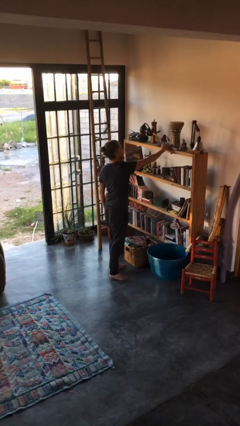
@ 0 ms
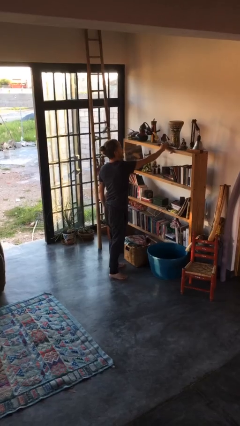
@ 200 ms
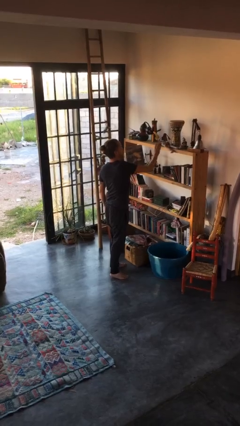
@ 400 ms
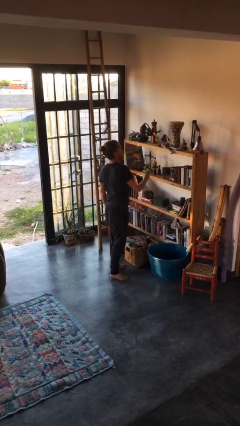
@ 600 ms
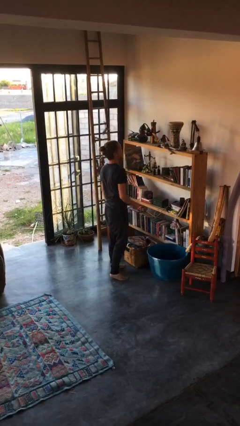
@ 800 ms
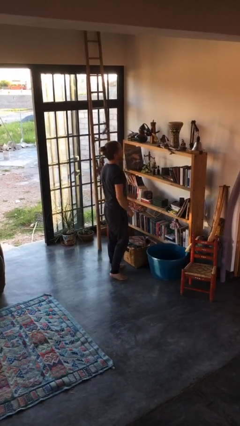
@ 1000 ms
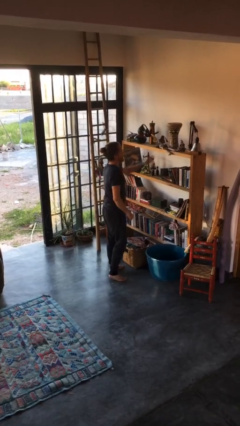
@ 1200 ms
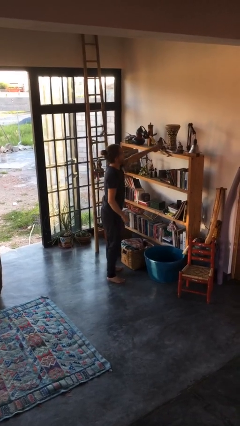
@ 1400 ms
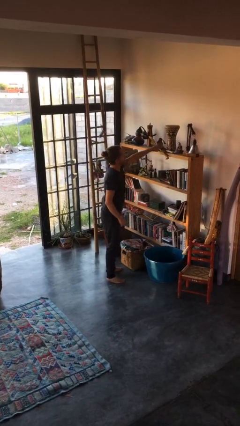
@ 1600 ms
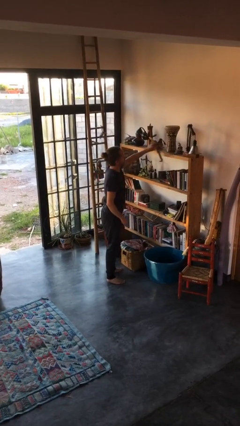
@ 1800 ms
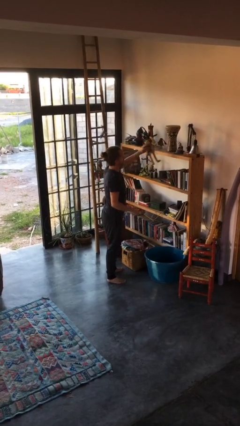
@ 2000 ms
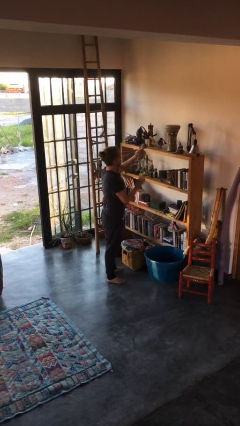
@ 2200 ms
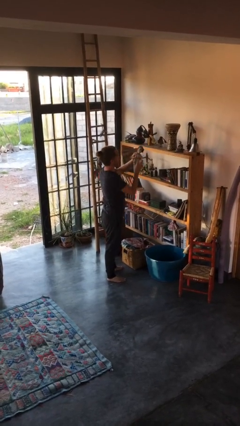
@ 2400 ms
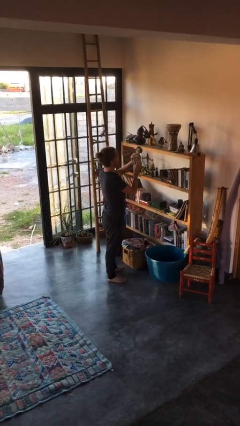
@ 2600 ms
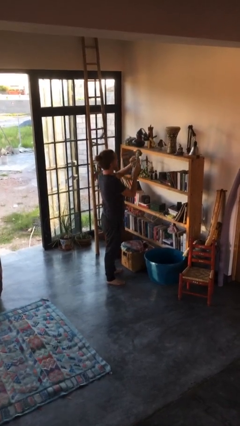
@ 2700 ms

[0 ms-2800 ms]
person picks up object from countertop

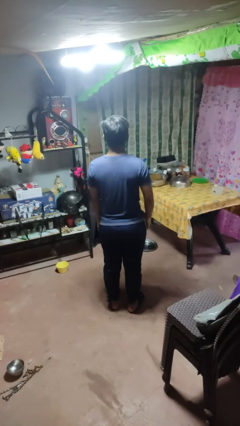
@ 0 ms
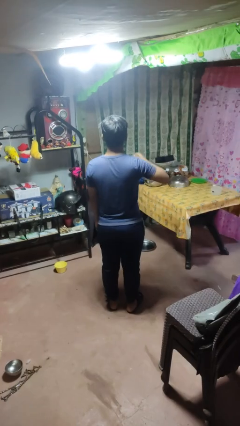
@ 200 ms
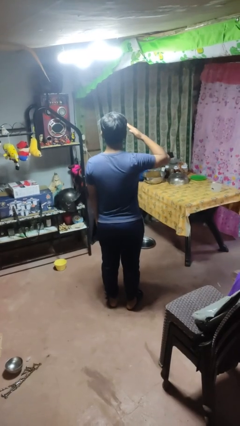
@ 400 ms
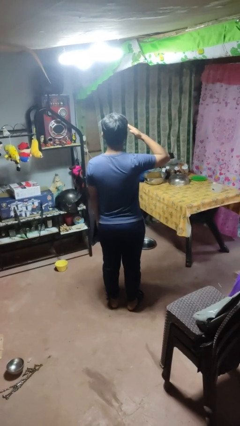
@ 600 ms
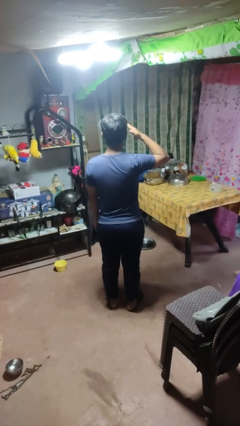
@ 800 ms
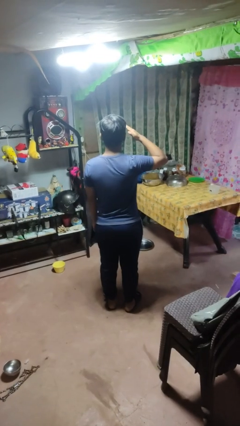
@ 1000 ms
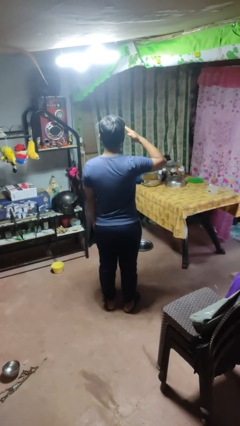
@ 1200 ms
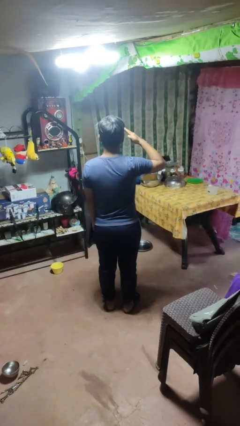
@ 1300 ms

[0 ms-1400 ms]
person salutes

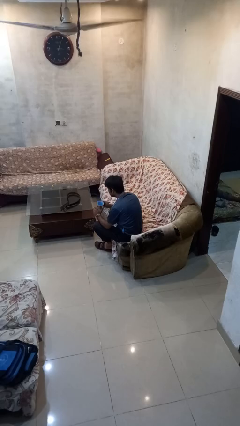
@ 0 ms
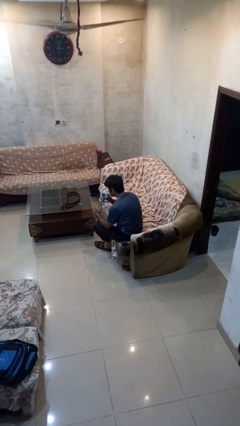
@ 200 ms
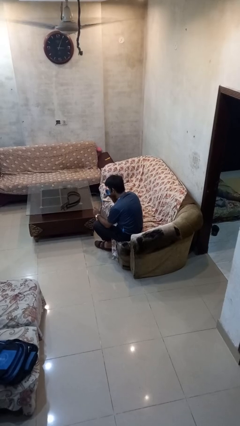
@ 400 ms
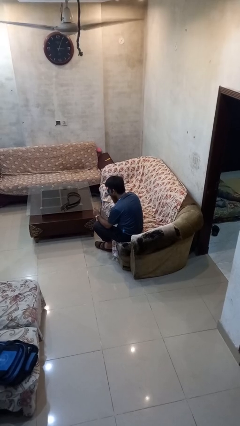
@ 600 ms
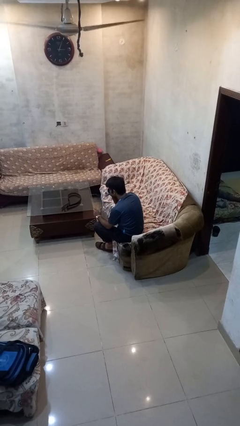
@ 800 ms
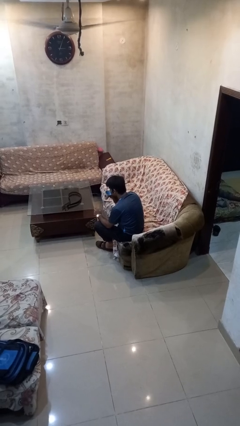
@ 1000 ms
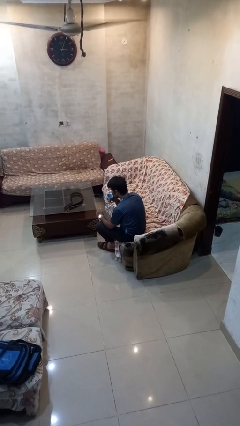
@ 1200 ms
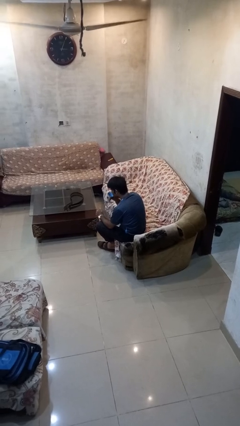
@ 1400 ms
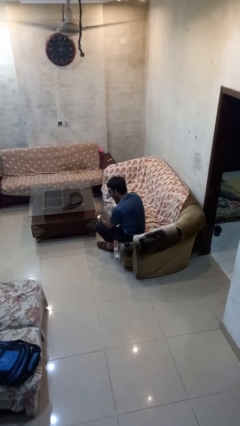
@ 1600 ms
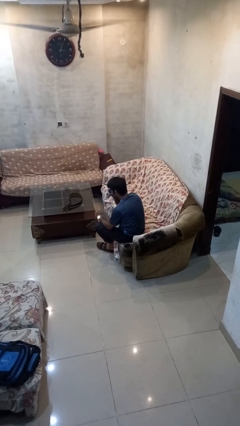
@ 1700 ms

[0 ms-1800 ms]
person drinks from mug

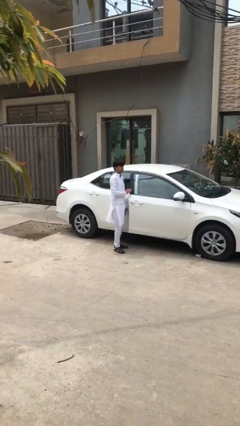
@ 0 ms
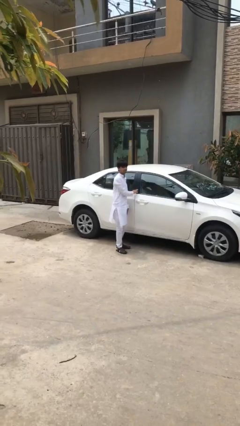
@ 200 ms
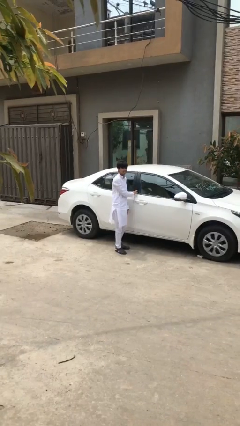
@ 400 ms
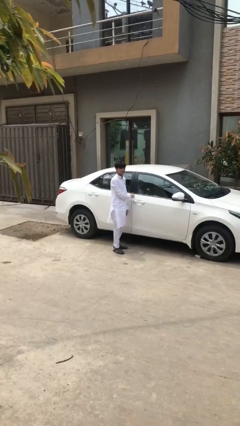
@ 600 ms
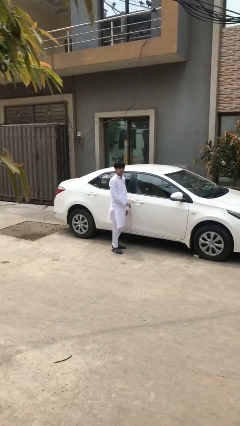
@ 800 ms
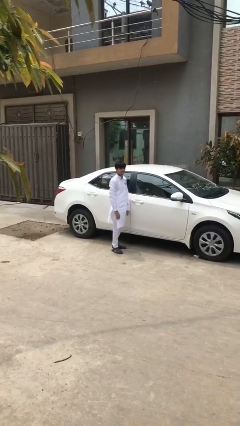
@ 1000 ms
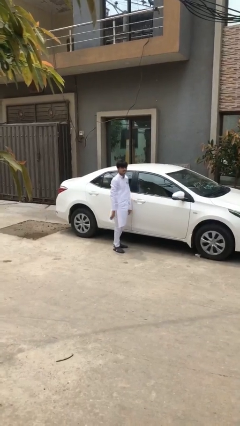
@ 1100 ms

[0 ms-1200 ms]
person closes car door

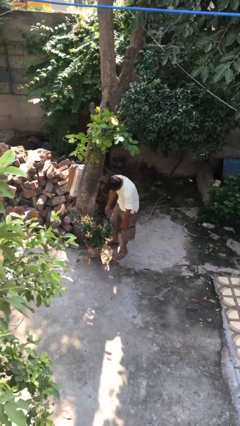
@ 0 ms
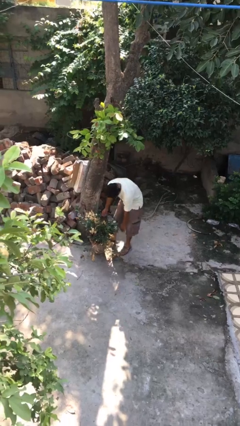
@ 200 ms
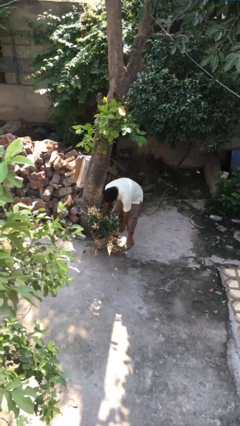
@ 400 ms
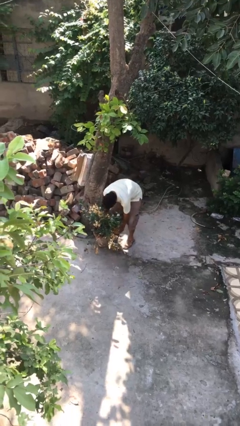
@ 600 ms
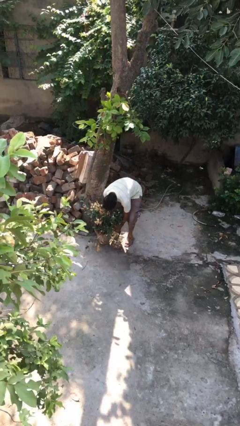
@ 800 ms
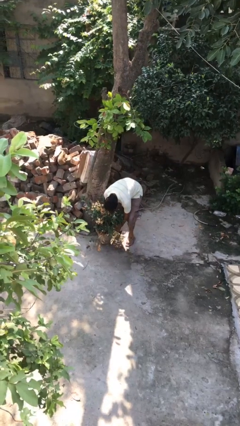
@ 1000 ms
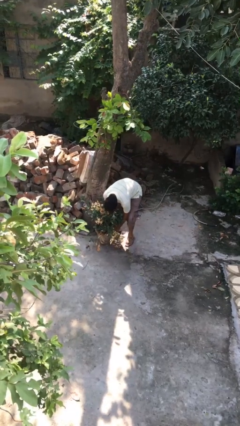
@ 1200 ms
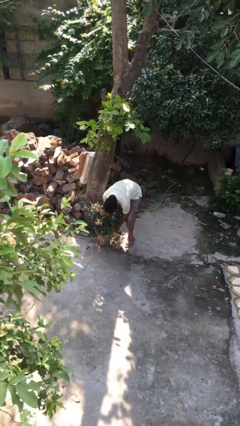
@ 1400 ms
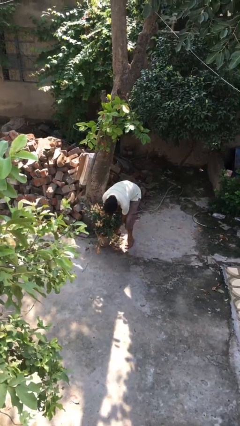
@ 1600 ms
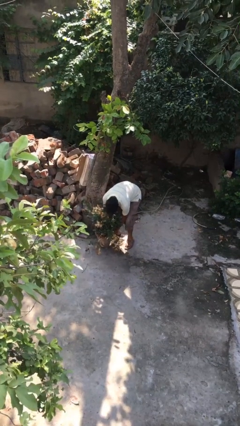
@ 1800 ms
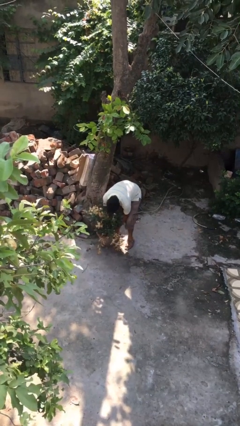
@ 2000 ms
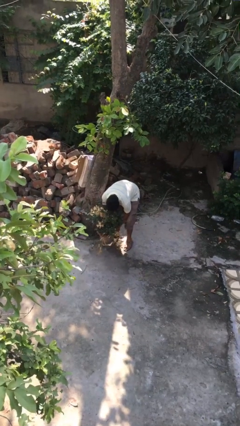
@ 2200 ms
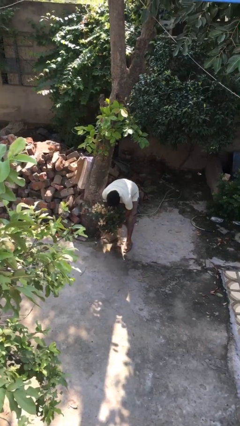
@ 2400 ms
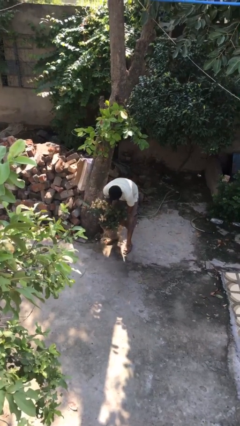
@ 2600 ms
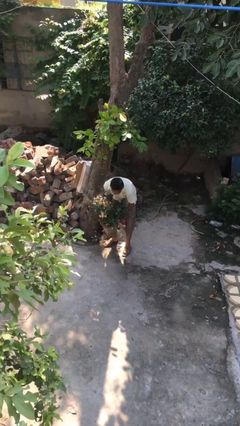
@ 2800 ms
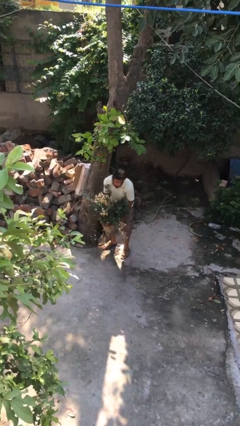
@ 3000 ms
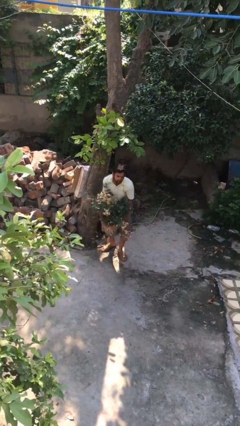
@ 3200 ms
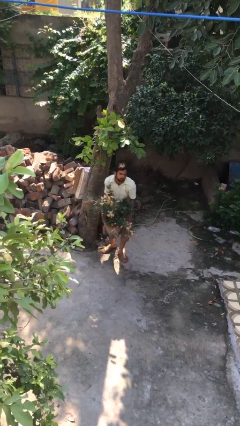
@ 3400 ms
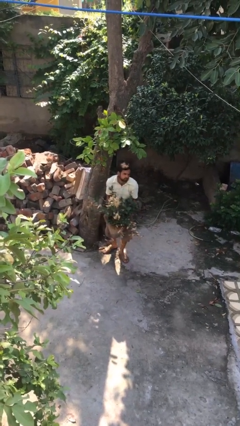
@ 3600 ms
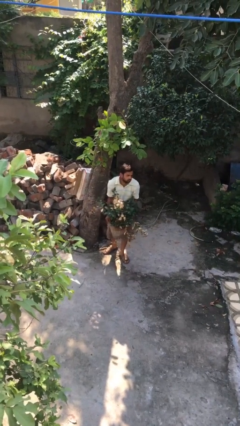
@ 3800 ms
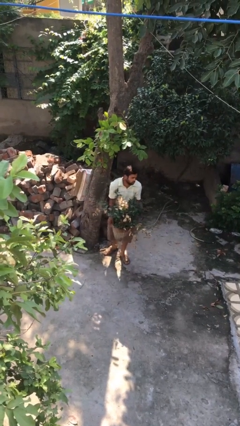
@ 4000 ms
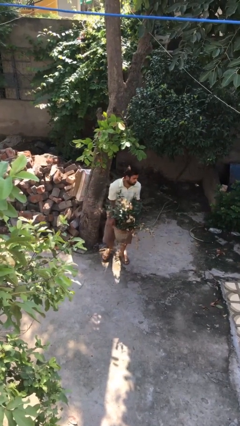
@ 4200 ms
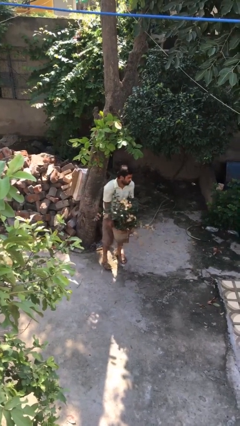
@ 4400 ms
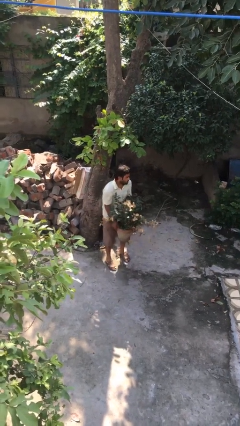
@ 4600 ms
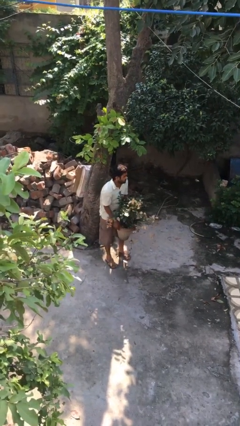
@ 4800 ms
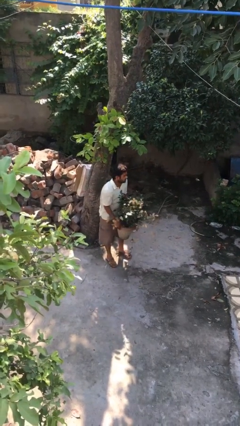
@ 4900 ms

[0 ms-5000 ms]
person picks up object from floor

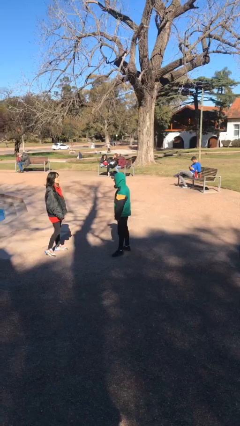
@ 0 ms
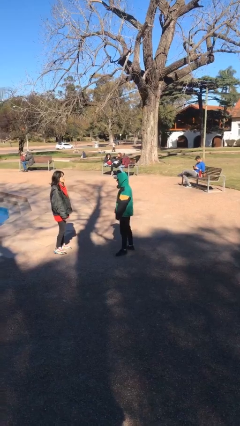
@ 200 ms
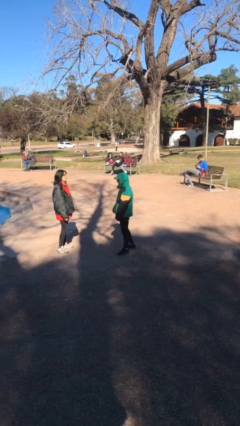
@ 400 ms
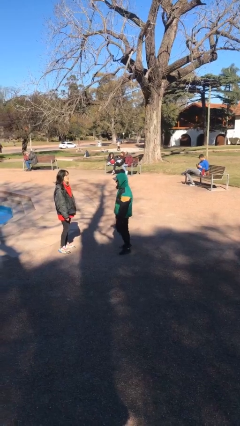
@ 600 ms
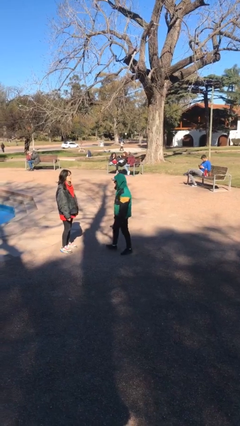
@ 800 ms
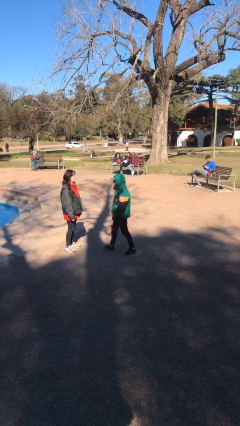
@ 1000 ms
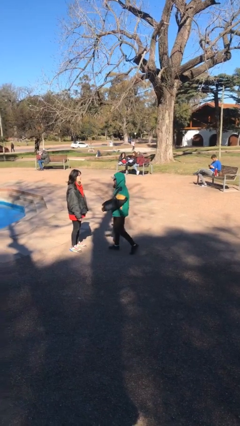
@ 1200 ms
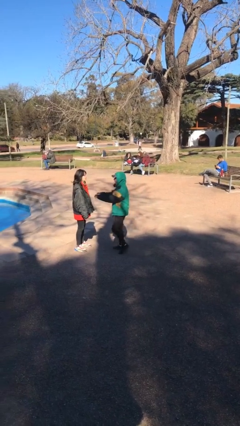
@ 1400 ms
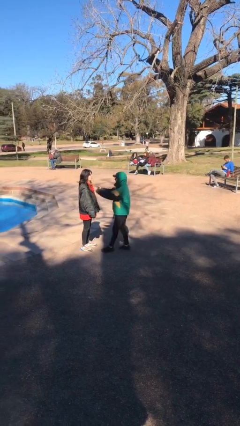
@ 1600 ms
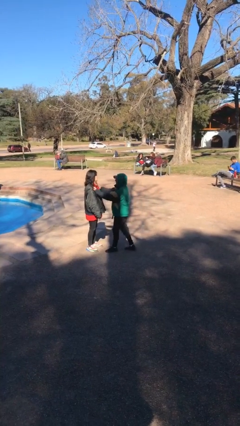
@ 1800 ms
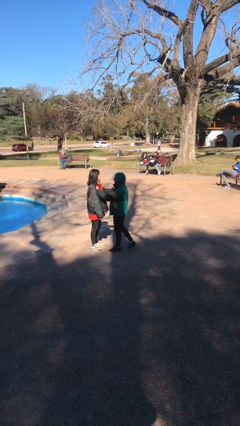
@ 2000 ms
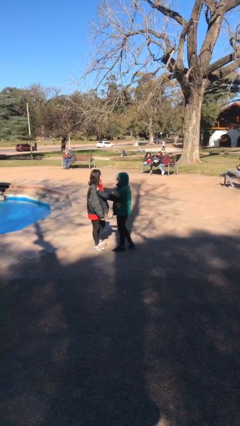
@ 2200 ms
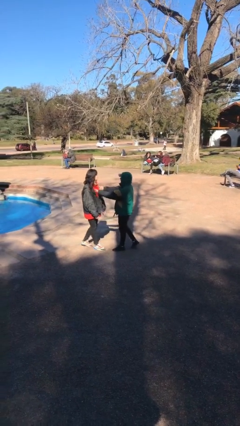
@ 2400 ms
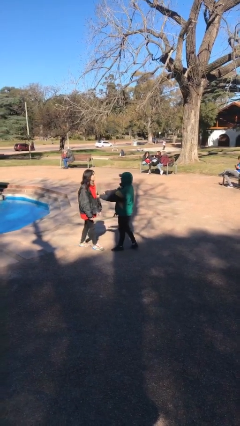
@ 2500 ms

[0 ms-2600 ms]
person shoves person

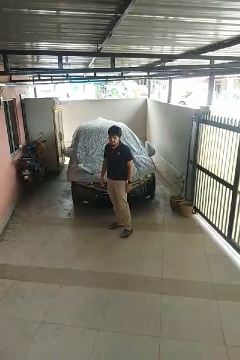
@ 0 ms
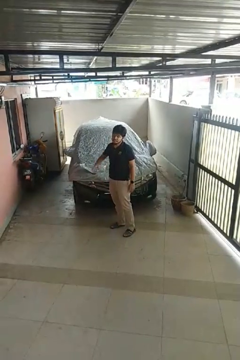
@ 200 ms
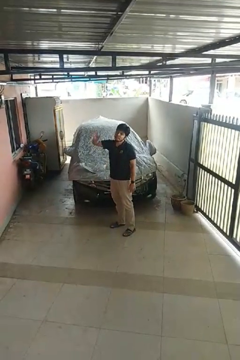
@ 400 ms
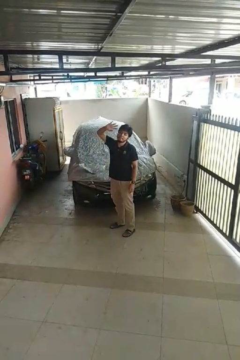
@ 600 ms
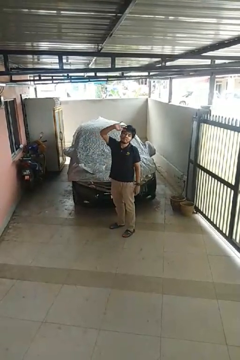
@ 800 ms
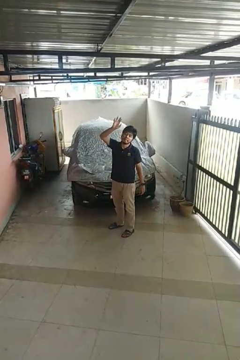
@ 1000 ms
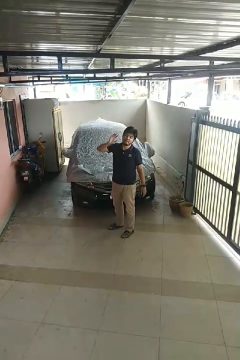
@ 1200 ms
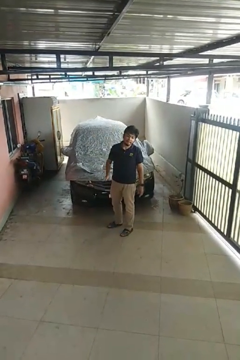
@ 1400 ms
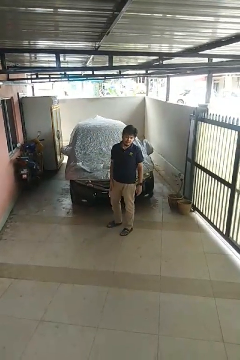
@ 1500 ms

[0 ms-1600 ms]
person waves at person

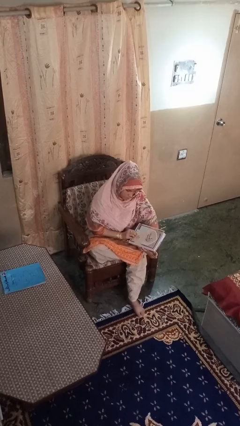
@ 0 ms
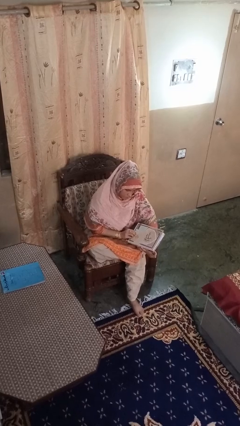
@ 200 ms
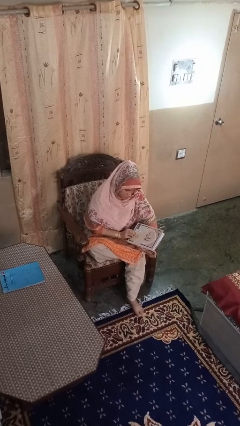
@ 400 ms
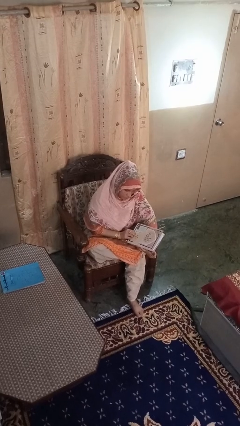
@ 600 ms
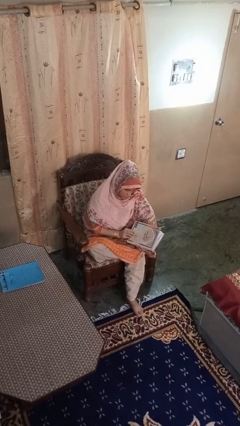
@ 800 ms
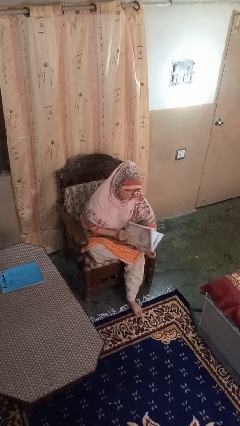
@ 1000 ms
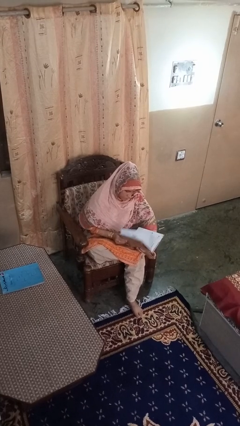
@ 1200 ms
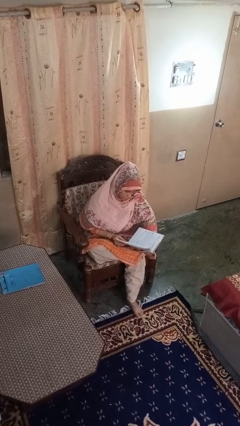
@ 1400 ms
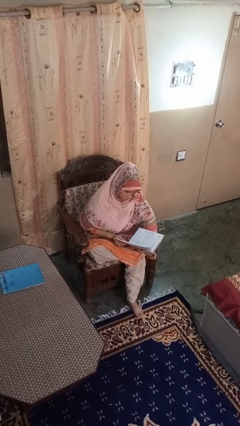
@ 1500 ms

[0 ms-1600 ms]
person reads book
